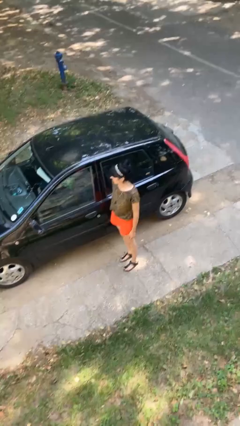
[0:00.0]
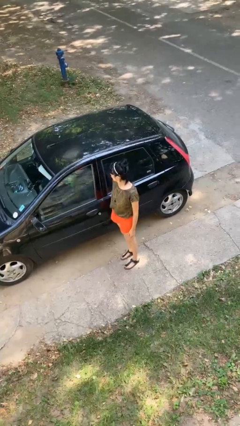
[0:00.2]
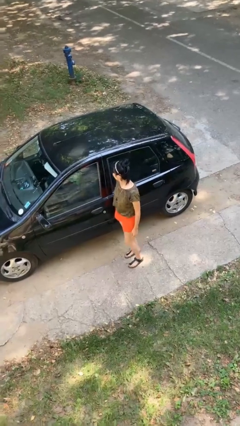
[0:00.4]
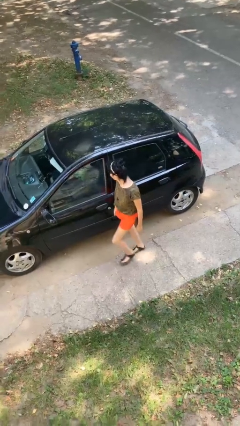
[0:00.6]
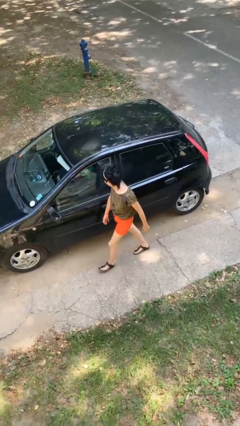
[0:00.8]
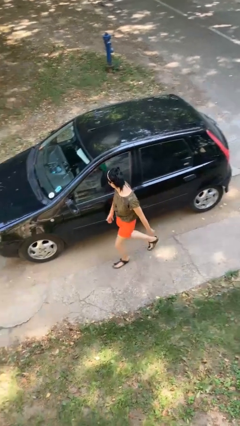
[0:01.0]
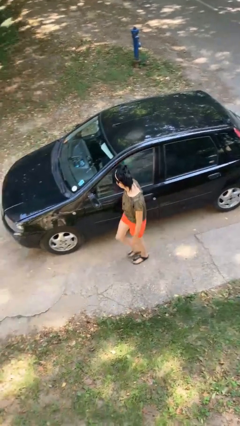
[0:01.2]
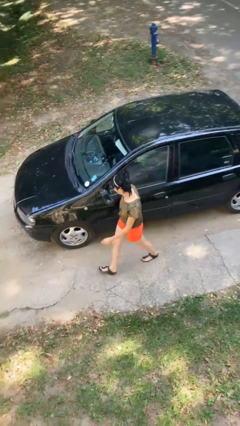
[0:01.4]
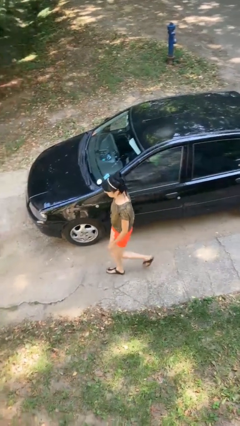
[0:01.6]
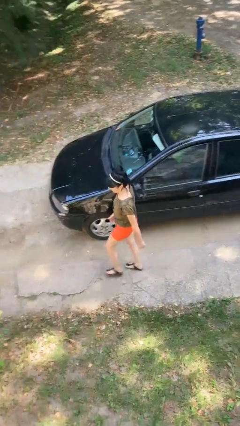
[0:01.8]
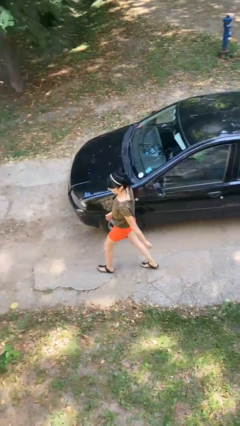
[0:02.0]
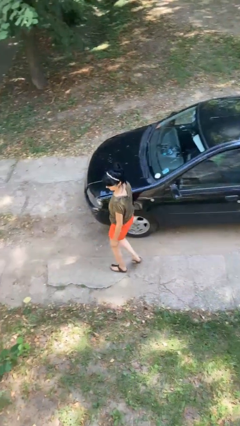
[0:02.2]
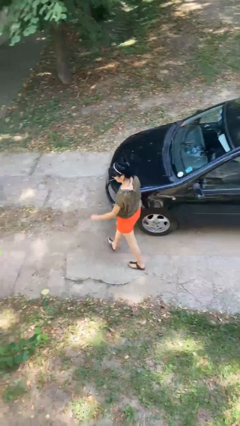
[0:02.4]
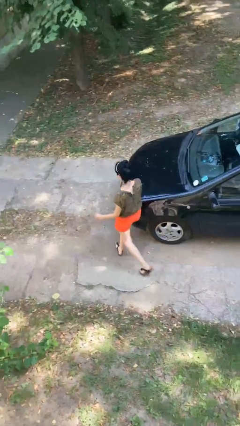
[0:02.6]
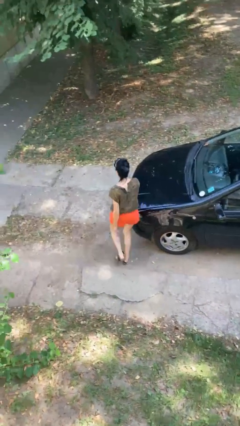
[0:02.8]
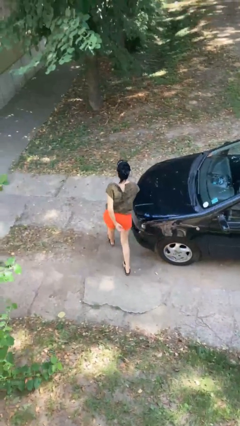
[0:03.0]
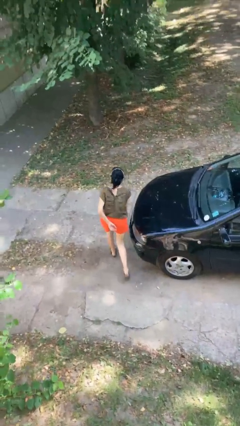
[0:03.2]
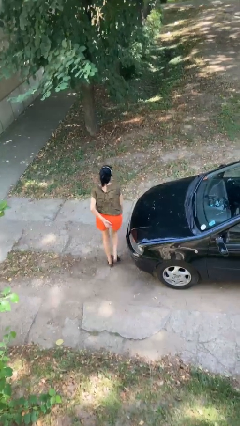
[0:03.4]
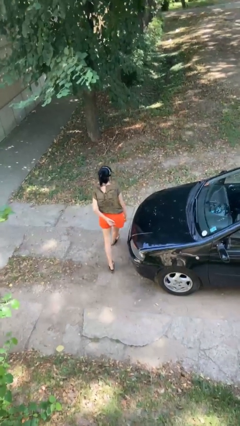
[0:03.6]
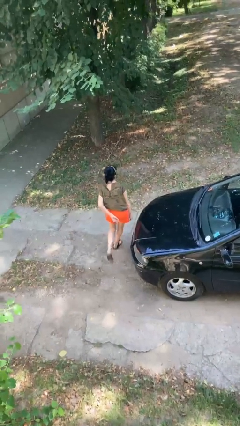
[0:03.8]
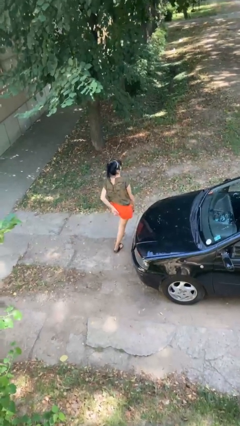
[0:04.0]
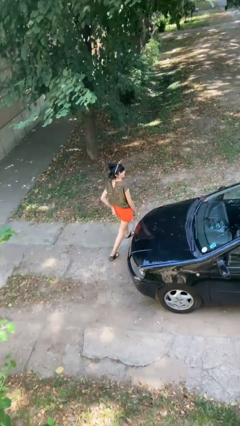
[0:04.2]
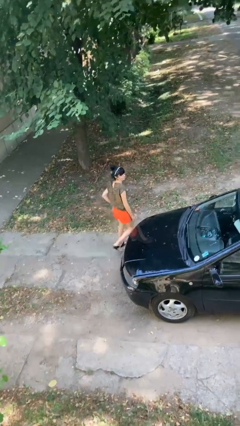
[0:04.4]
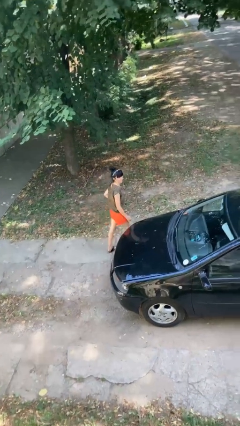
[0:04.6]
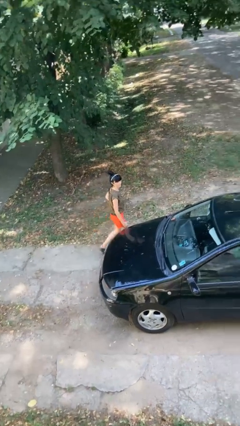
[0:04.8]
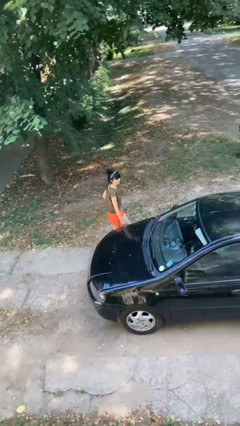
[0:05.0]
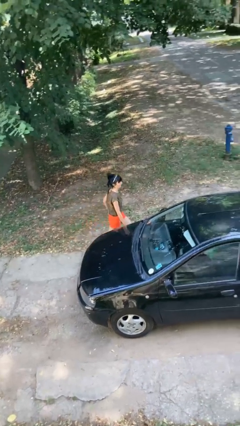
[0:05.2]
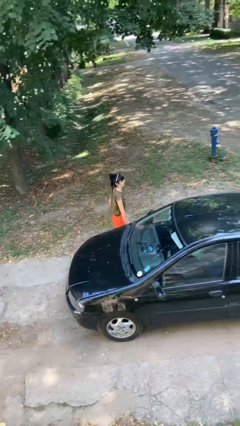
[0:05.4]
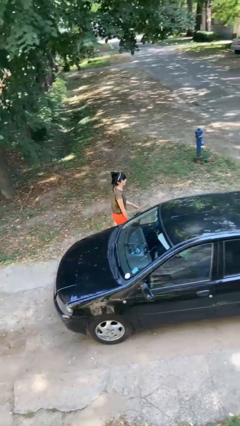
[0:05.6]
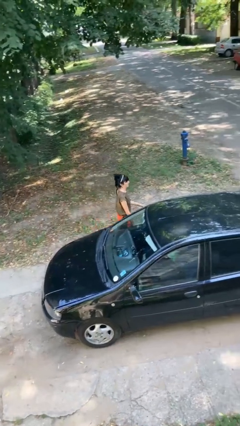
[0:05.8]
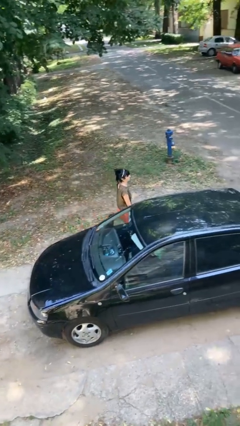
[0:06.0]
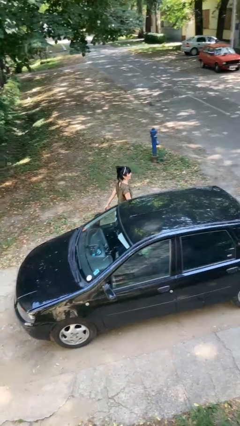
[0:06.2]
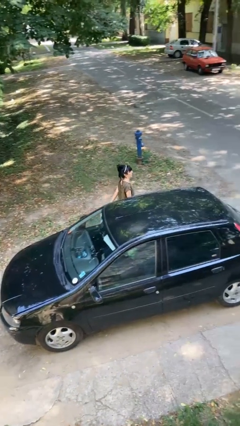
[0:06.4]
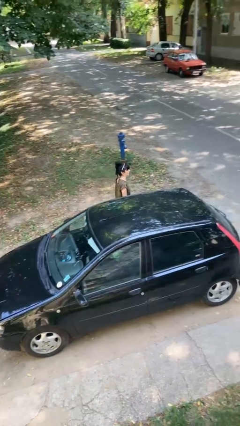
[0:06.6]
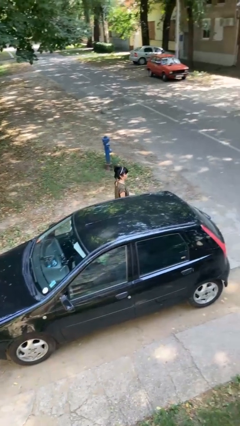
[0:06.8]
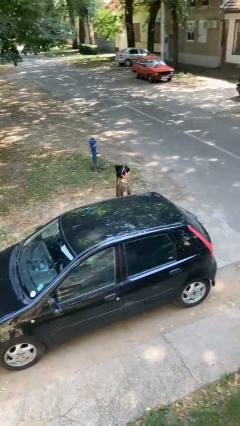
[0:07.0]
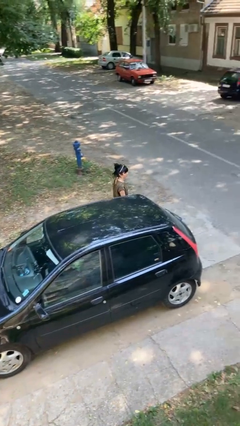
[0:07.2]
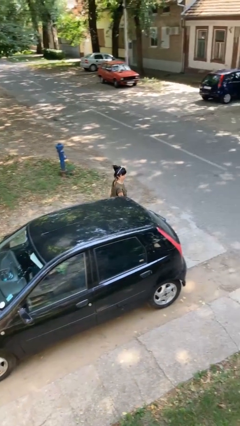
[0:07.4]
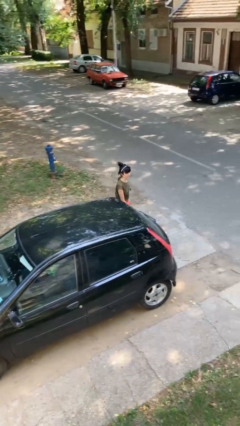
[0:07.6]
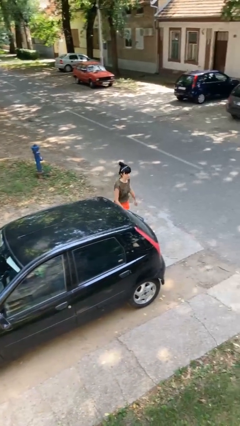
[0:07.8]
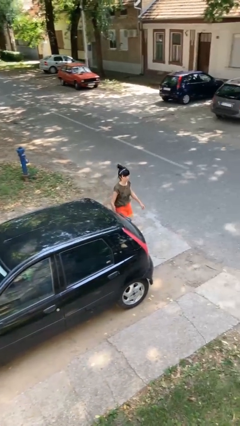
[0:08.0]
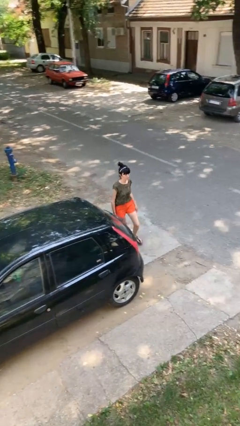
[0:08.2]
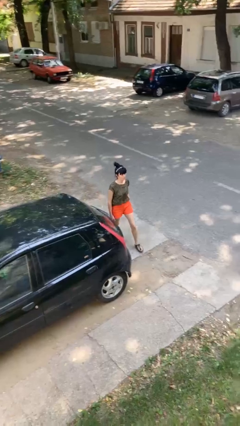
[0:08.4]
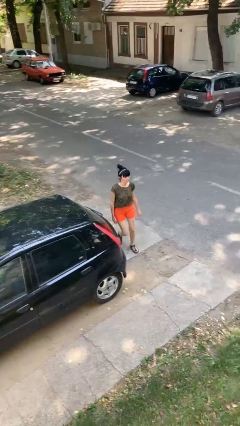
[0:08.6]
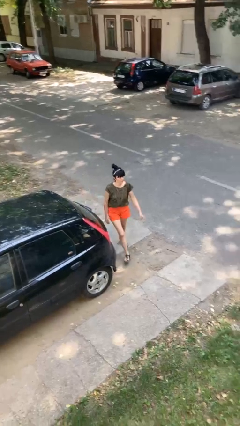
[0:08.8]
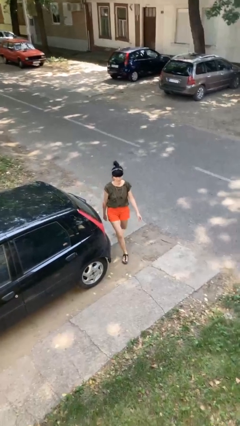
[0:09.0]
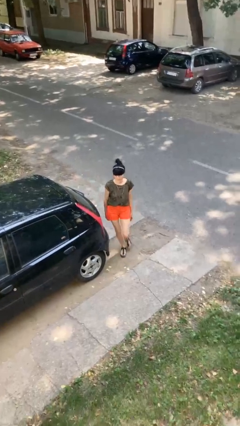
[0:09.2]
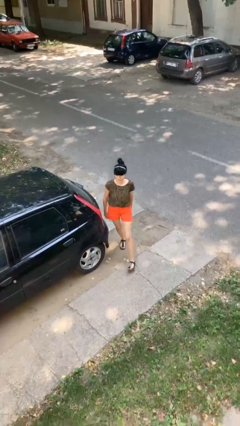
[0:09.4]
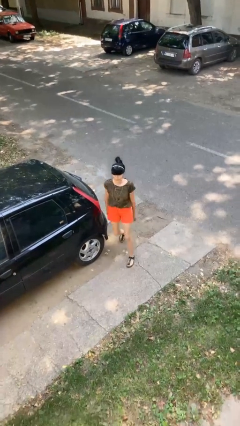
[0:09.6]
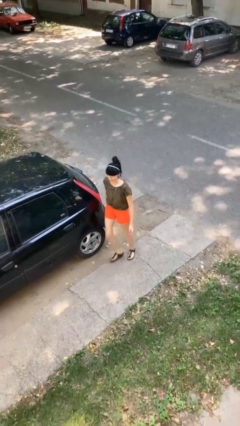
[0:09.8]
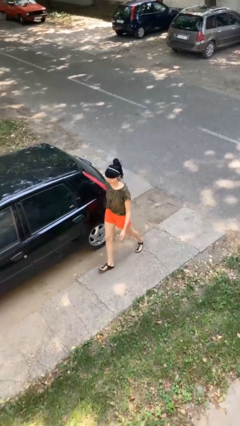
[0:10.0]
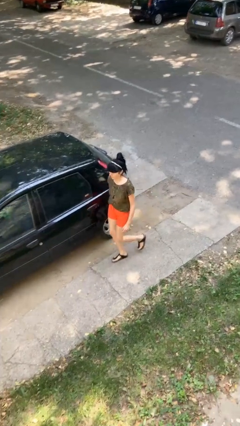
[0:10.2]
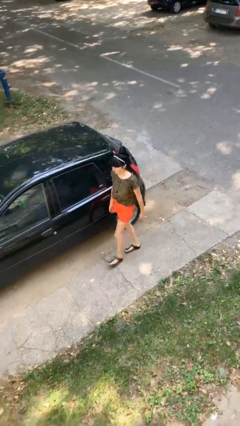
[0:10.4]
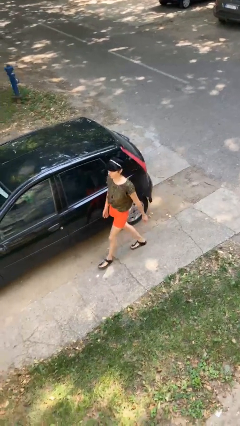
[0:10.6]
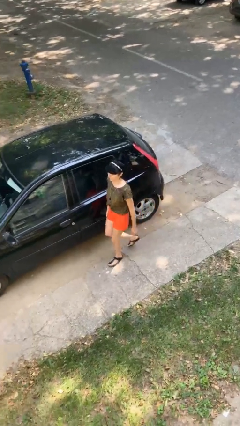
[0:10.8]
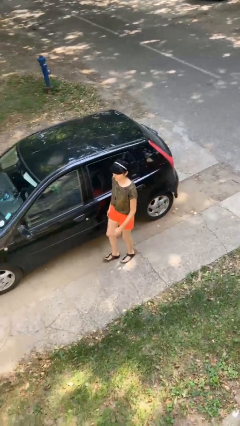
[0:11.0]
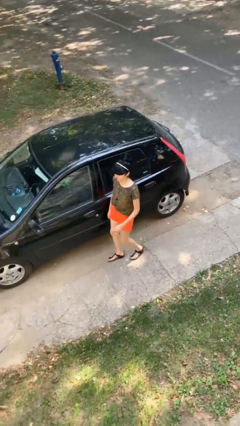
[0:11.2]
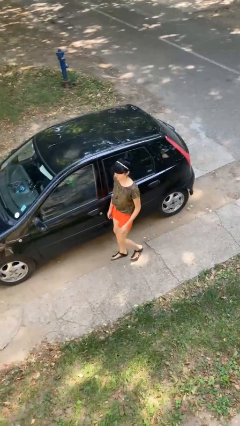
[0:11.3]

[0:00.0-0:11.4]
person walks around car

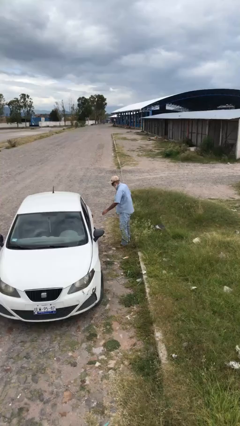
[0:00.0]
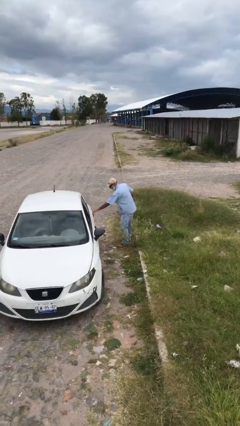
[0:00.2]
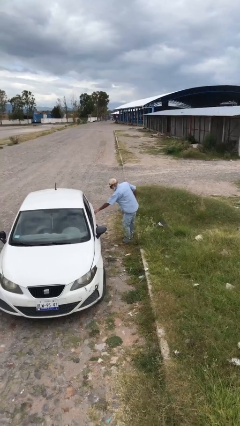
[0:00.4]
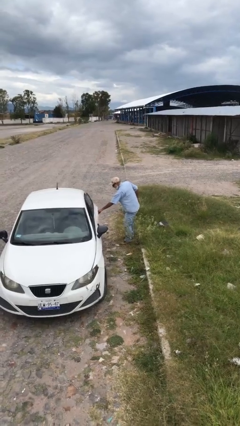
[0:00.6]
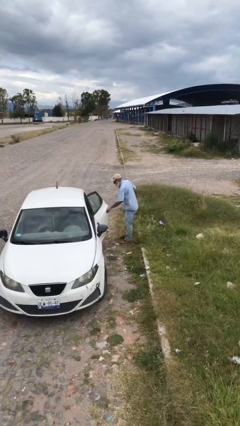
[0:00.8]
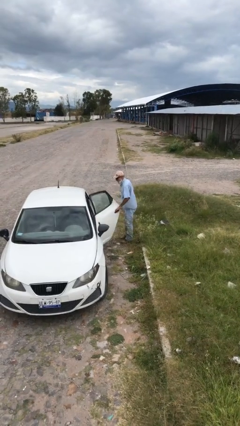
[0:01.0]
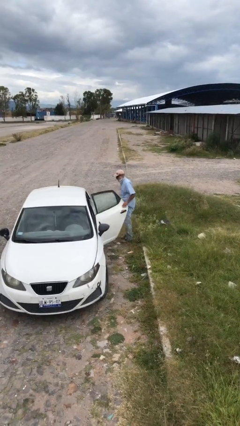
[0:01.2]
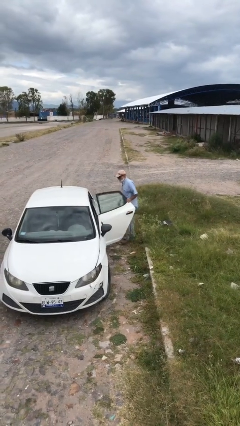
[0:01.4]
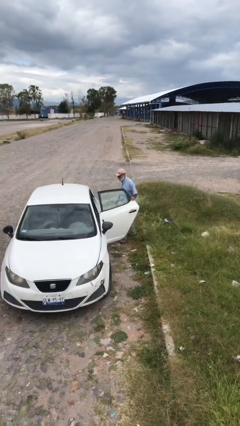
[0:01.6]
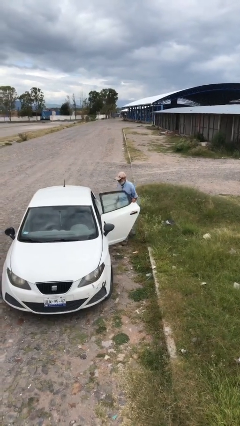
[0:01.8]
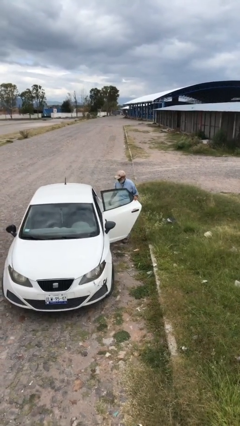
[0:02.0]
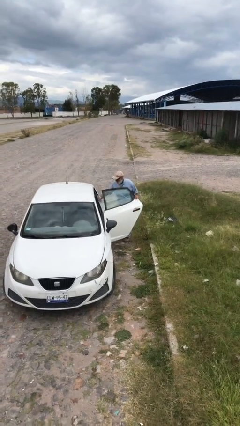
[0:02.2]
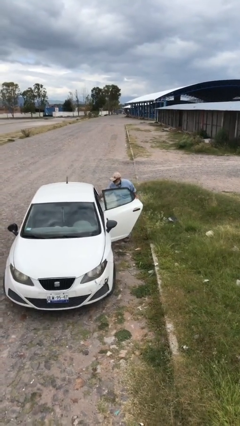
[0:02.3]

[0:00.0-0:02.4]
person opens car door

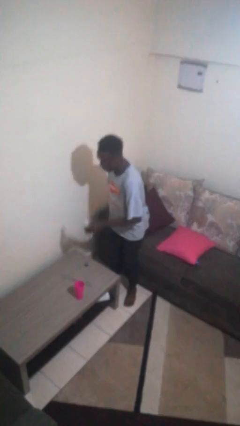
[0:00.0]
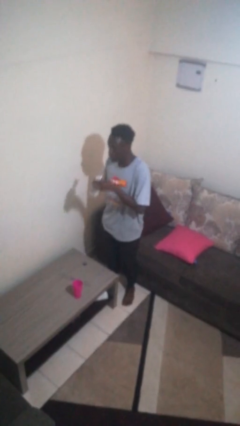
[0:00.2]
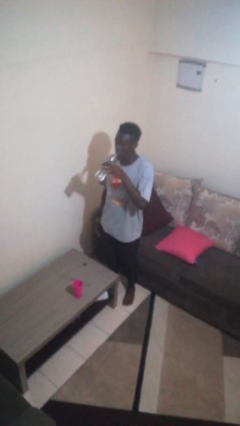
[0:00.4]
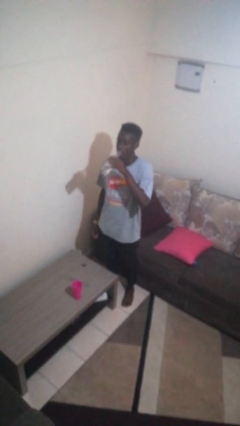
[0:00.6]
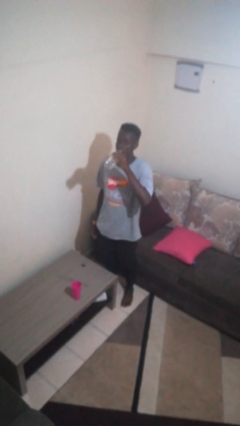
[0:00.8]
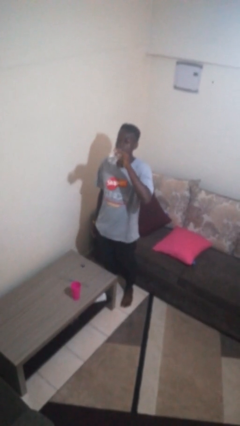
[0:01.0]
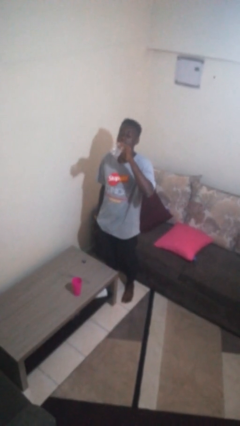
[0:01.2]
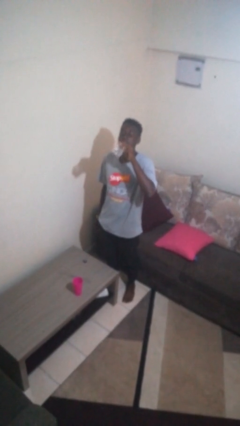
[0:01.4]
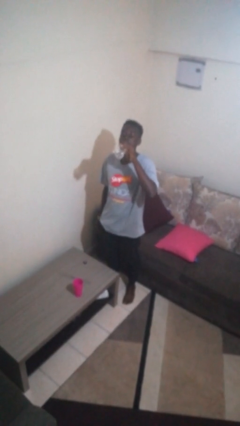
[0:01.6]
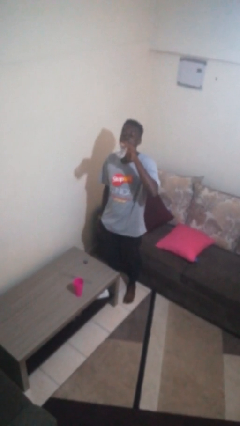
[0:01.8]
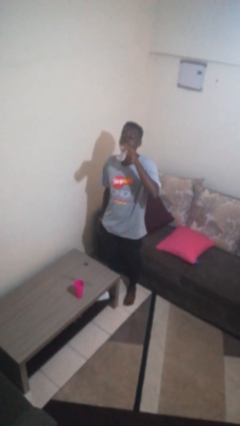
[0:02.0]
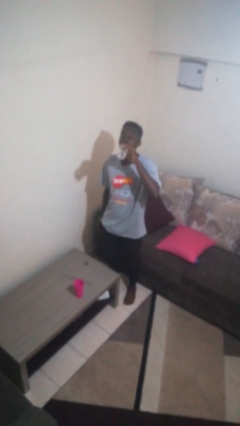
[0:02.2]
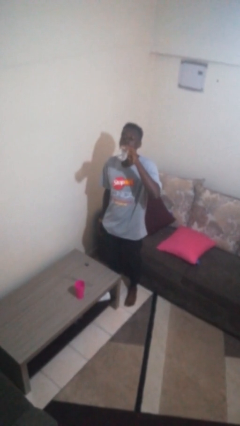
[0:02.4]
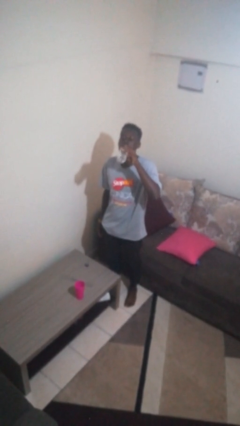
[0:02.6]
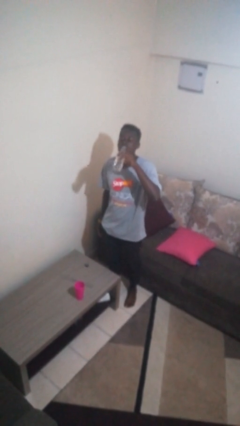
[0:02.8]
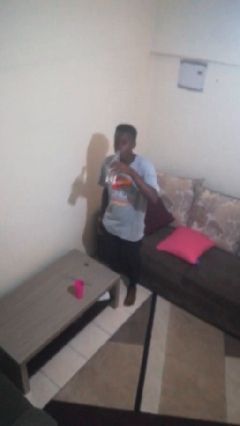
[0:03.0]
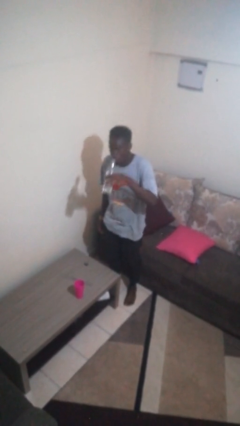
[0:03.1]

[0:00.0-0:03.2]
person drinks from bottle

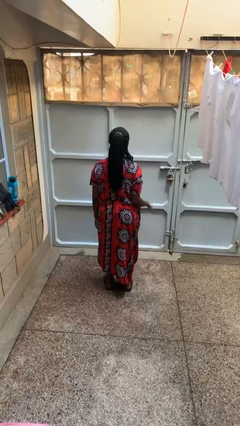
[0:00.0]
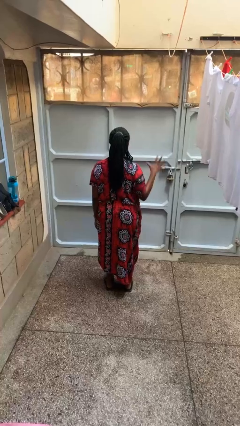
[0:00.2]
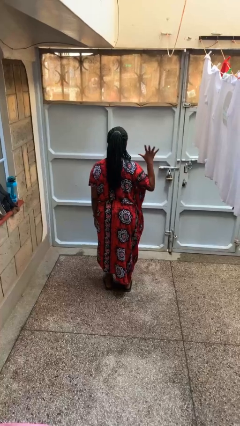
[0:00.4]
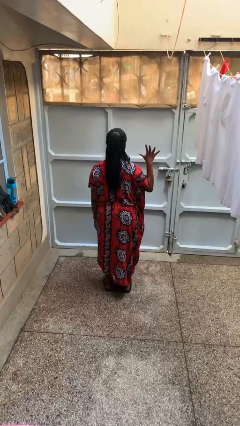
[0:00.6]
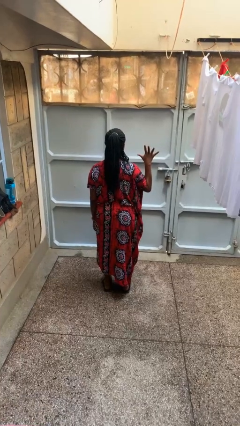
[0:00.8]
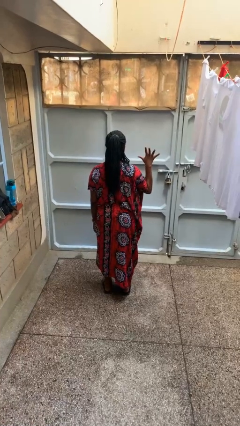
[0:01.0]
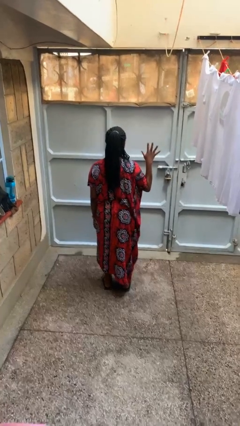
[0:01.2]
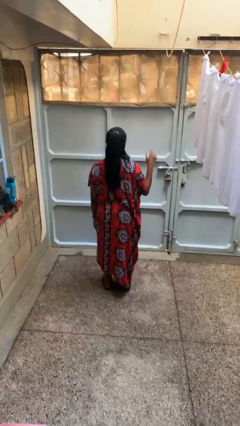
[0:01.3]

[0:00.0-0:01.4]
person gestures number five
